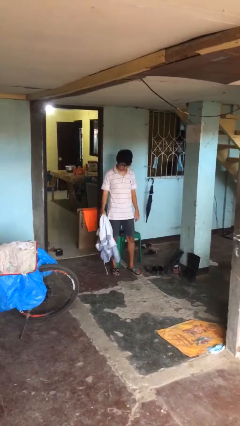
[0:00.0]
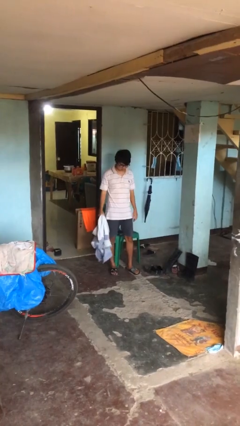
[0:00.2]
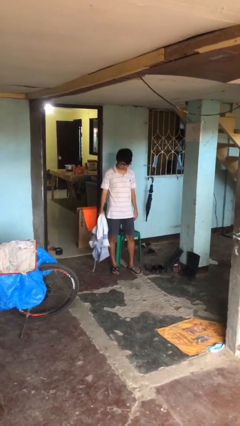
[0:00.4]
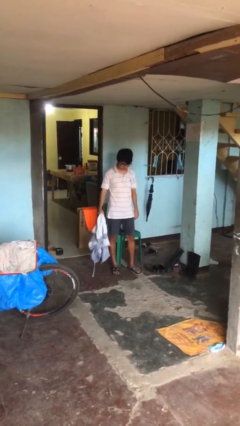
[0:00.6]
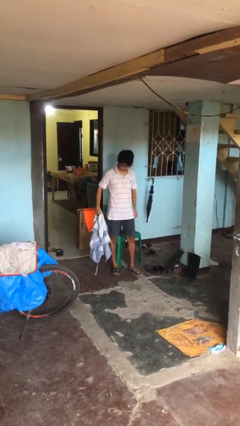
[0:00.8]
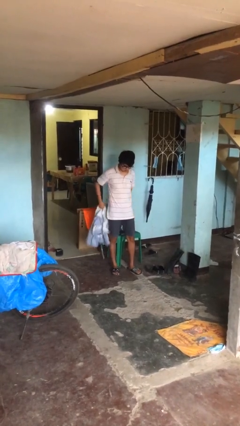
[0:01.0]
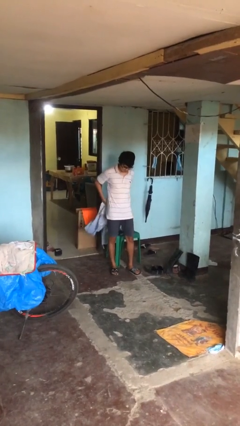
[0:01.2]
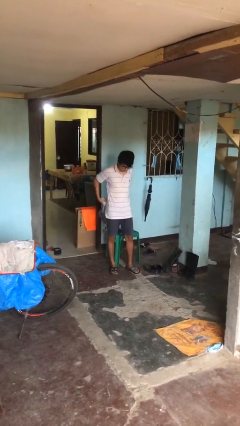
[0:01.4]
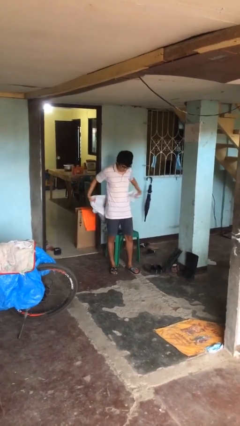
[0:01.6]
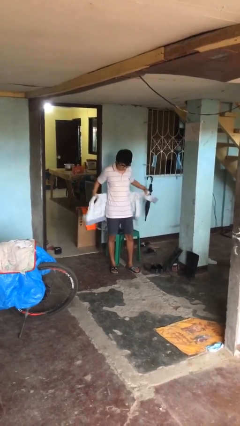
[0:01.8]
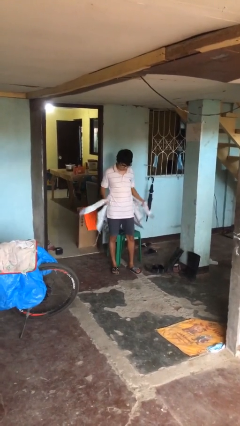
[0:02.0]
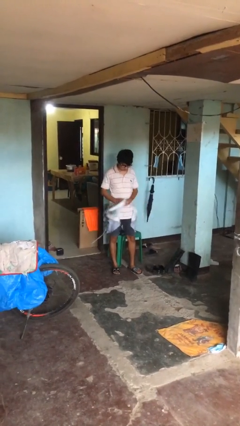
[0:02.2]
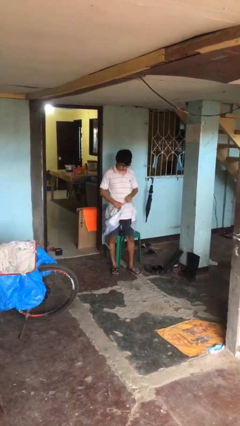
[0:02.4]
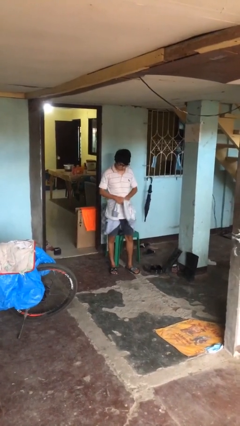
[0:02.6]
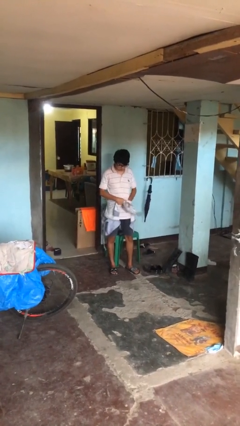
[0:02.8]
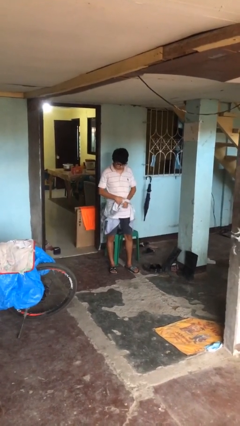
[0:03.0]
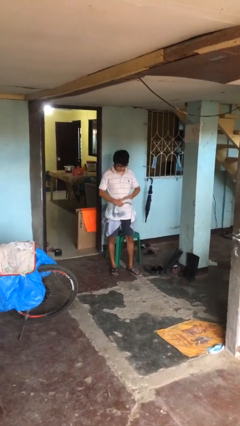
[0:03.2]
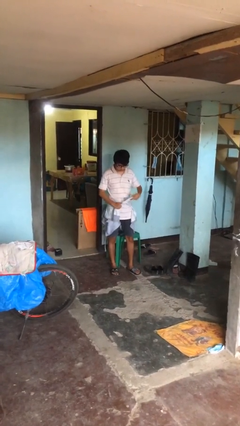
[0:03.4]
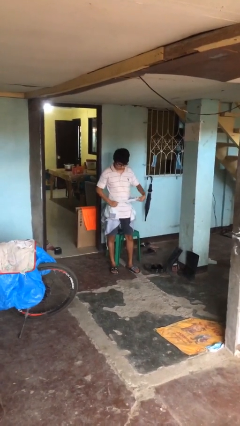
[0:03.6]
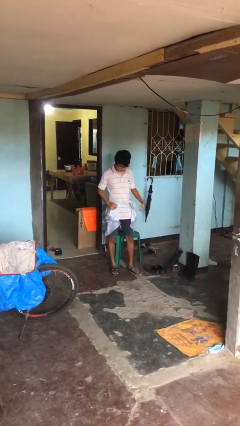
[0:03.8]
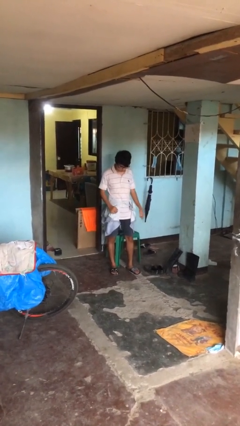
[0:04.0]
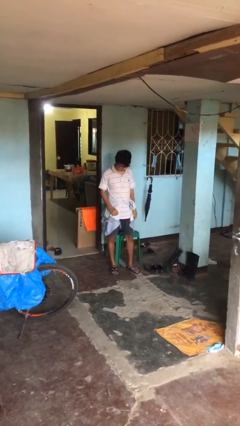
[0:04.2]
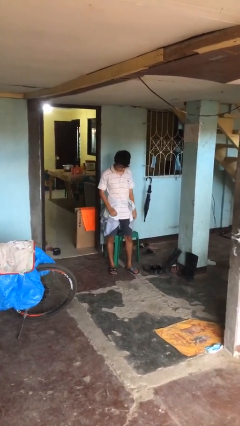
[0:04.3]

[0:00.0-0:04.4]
person ties jacket around waist

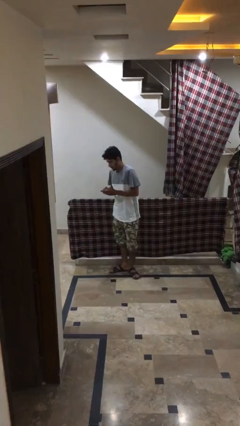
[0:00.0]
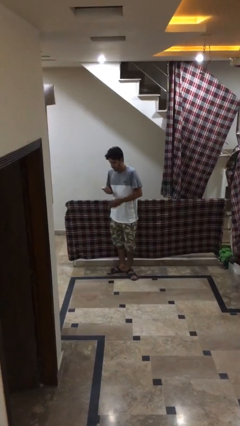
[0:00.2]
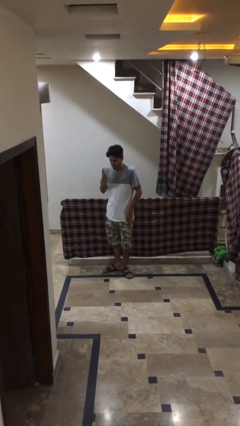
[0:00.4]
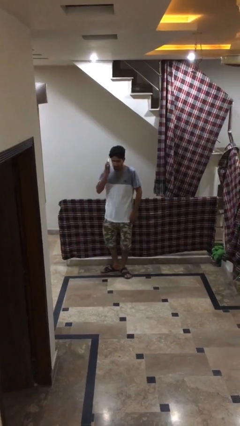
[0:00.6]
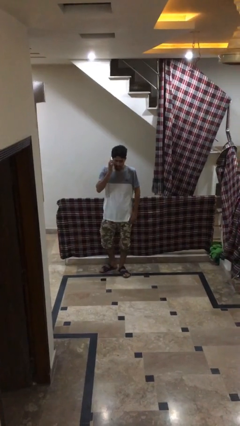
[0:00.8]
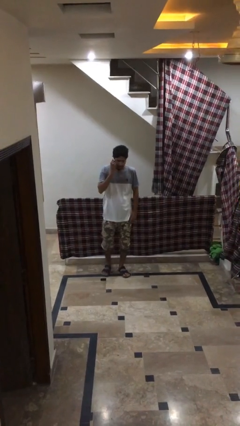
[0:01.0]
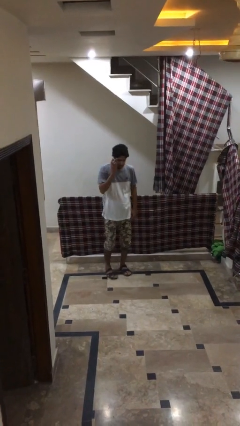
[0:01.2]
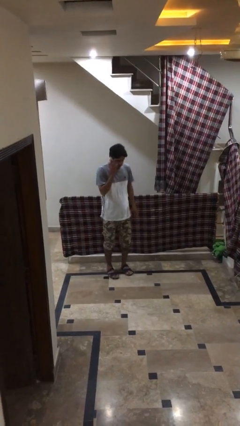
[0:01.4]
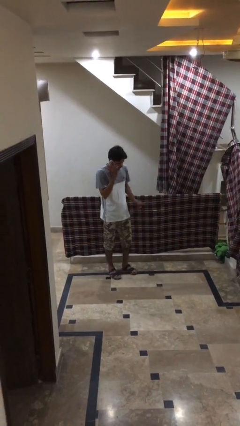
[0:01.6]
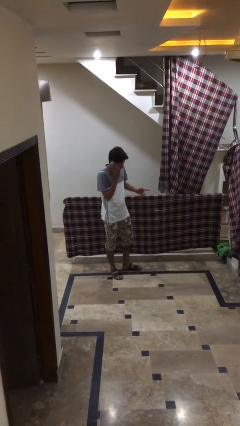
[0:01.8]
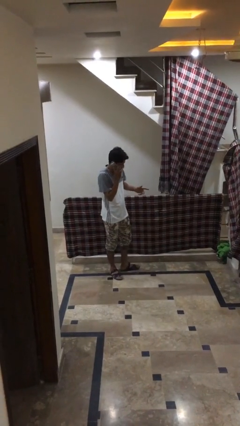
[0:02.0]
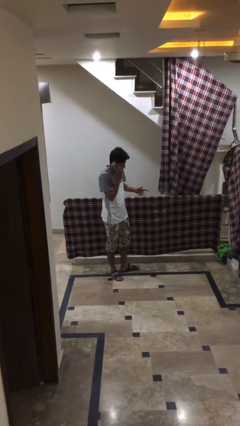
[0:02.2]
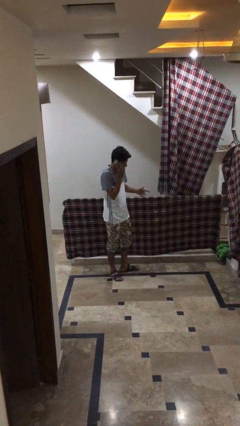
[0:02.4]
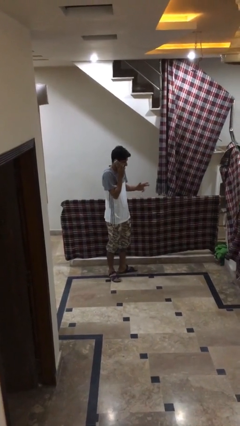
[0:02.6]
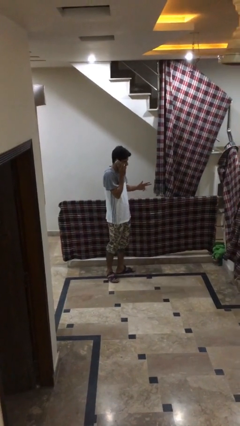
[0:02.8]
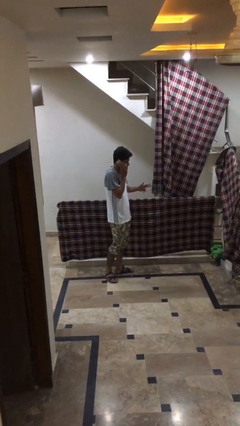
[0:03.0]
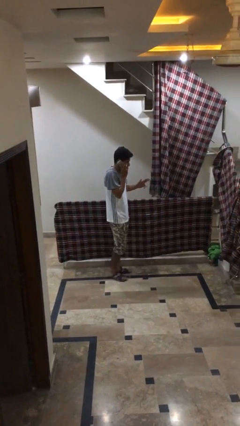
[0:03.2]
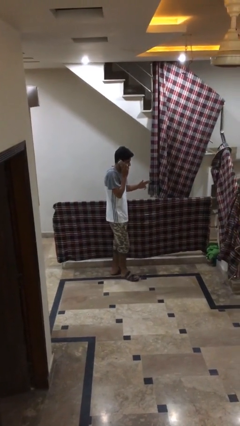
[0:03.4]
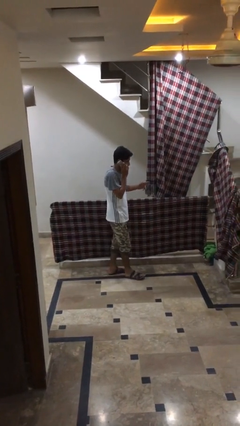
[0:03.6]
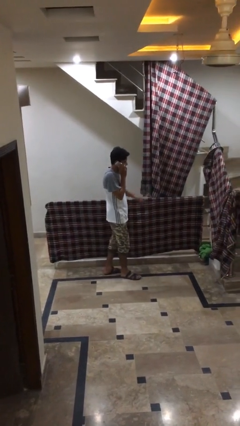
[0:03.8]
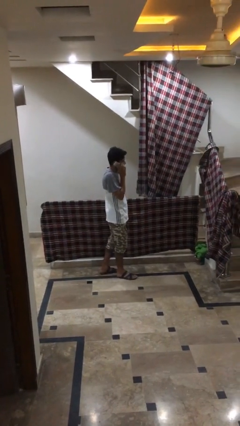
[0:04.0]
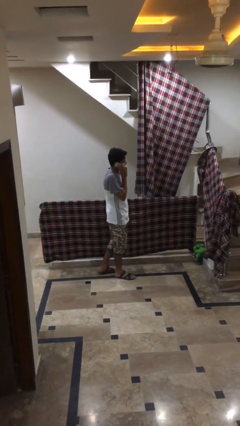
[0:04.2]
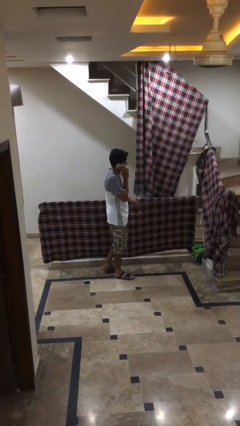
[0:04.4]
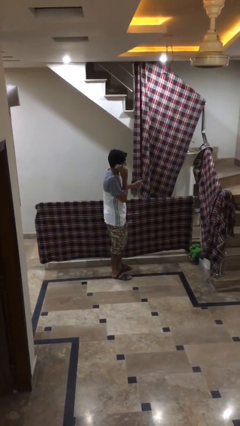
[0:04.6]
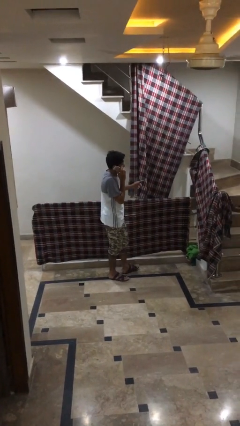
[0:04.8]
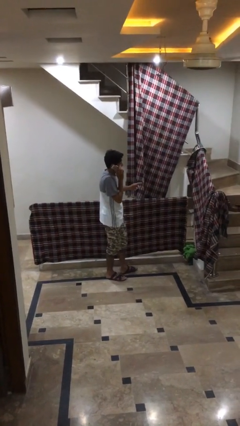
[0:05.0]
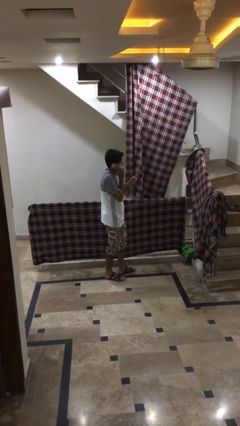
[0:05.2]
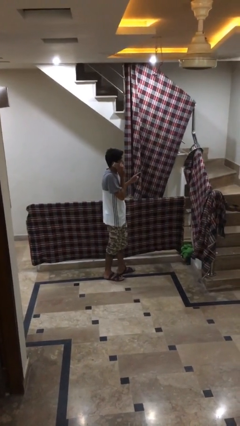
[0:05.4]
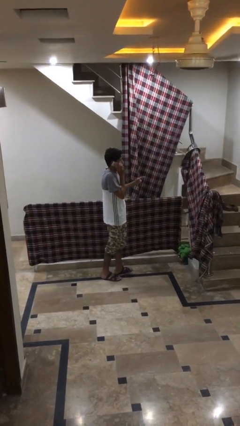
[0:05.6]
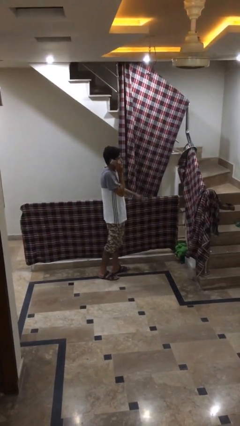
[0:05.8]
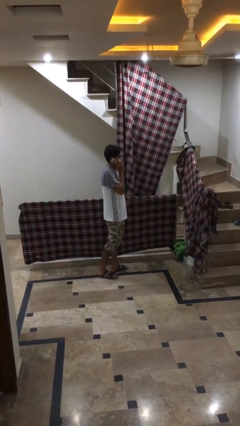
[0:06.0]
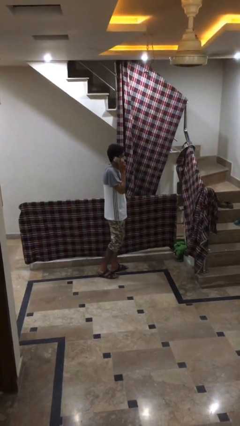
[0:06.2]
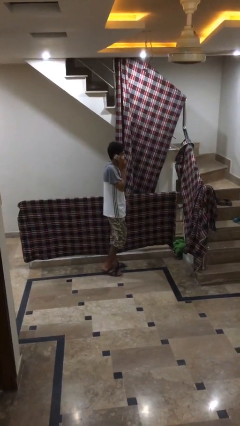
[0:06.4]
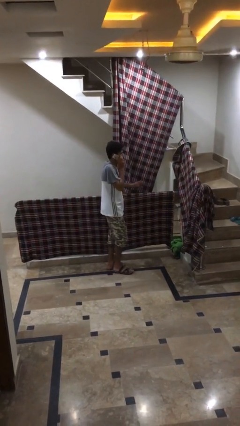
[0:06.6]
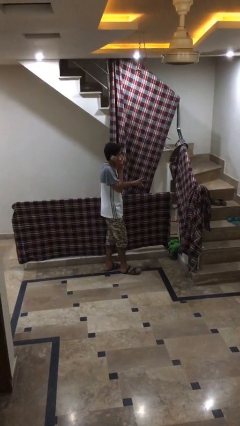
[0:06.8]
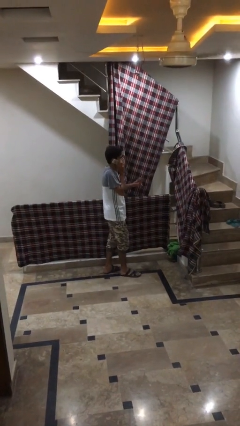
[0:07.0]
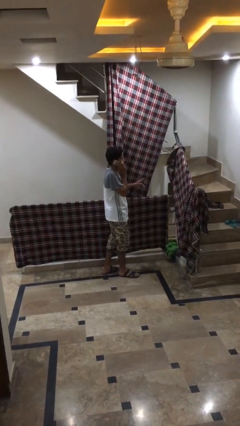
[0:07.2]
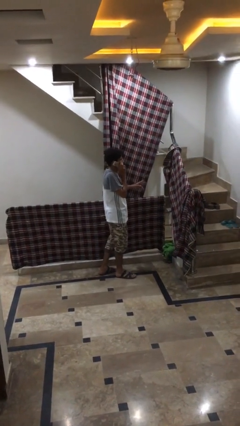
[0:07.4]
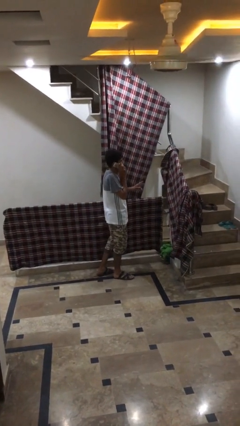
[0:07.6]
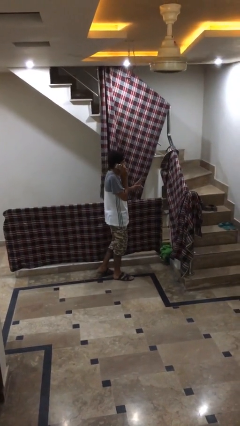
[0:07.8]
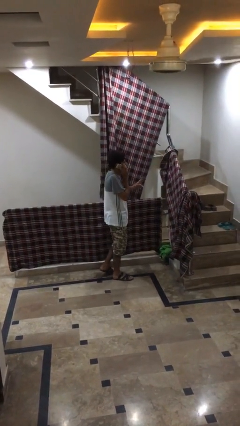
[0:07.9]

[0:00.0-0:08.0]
person talks on phone

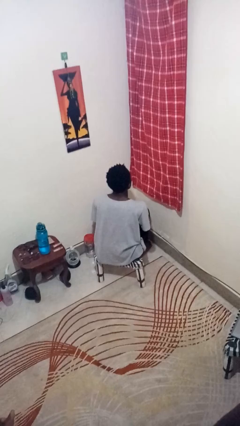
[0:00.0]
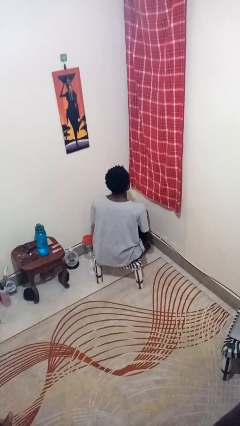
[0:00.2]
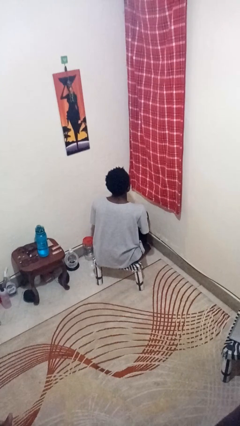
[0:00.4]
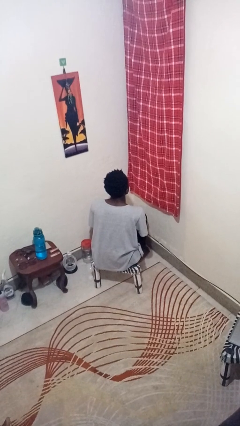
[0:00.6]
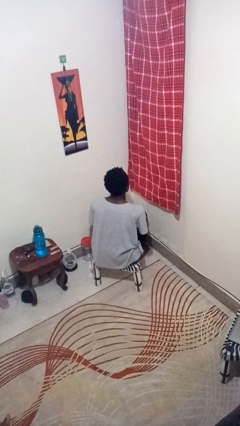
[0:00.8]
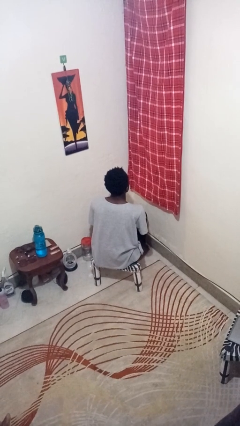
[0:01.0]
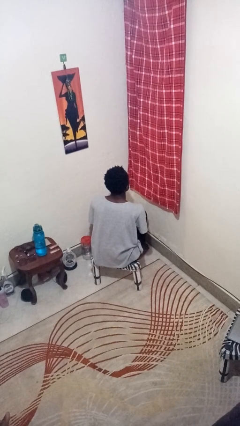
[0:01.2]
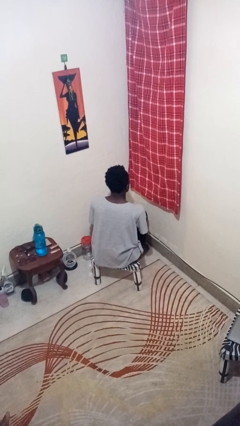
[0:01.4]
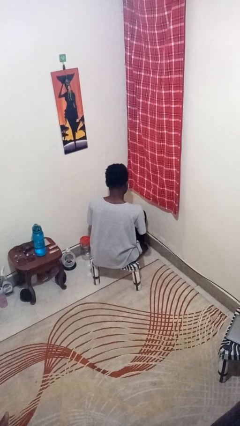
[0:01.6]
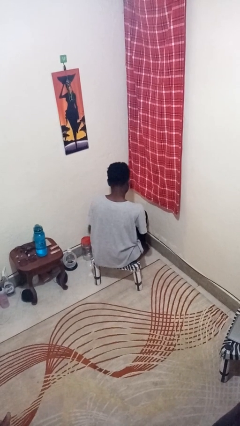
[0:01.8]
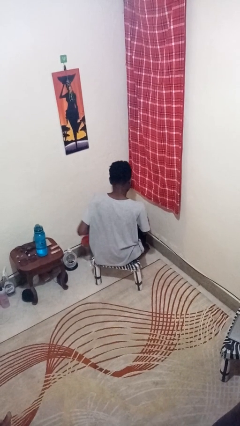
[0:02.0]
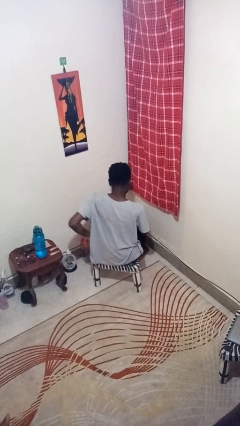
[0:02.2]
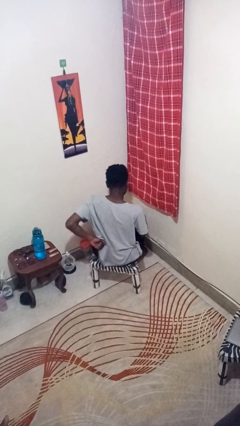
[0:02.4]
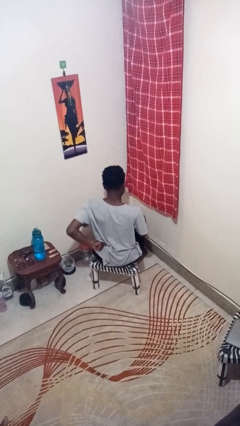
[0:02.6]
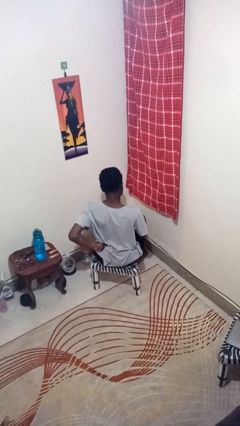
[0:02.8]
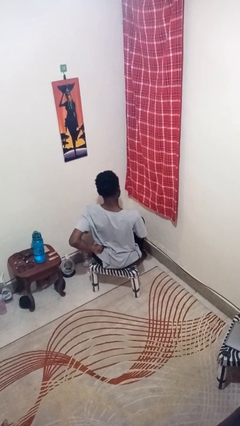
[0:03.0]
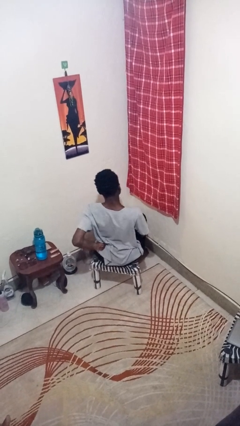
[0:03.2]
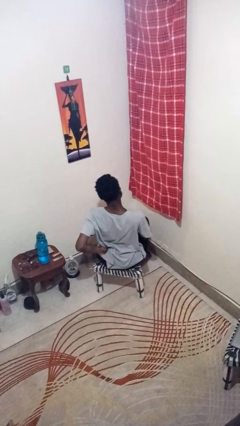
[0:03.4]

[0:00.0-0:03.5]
person stretches back

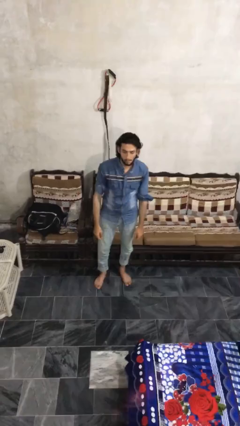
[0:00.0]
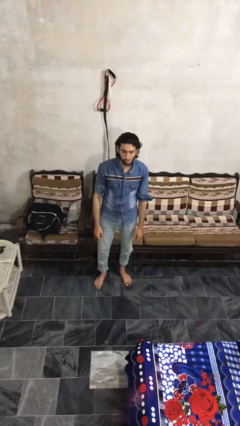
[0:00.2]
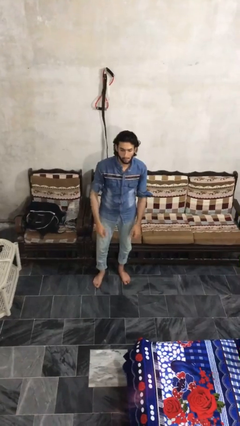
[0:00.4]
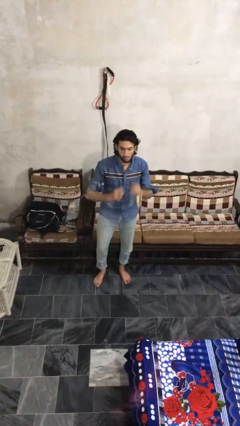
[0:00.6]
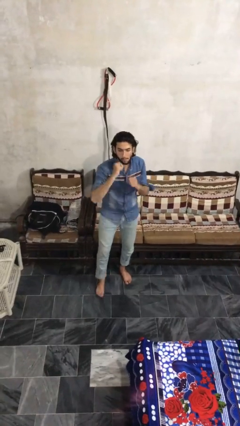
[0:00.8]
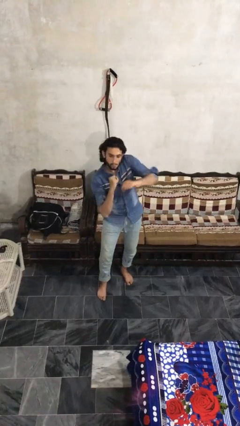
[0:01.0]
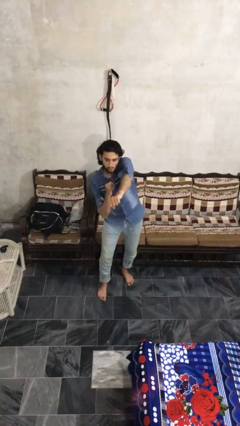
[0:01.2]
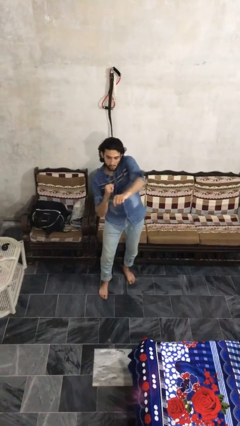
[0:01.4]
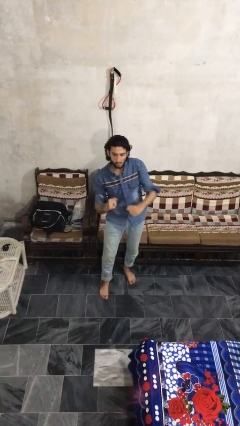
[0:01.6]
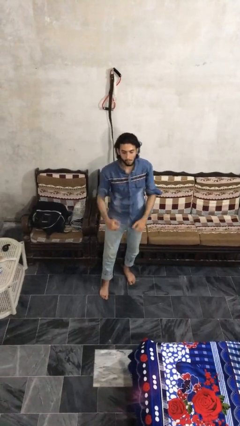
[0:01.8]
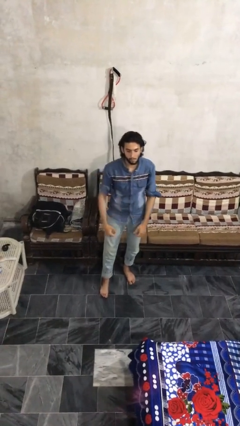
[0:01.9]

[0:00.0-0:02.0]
person punches
